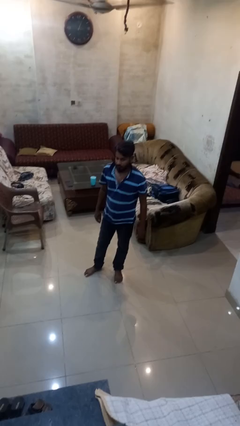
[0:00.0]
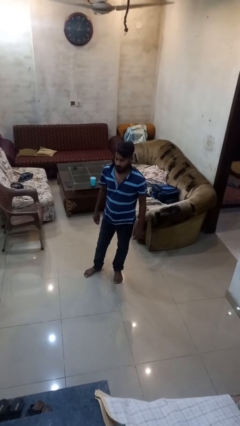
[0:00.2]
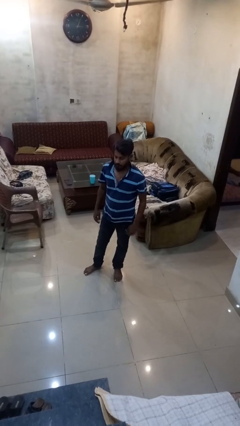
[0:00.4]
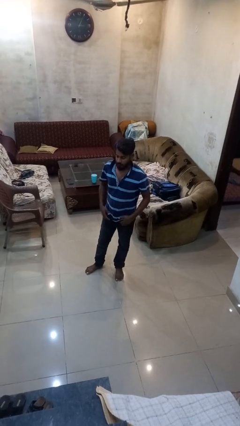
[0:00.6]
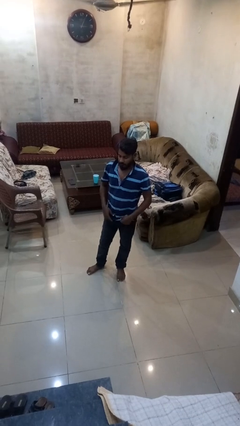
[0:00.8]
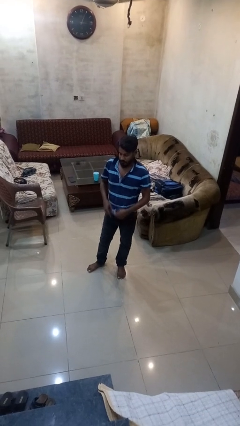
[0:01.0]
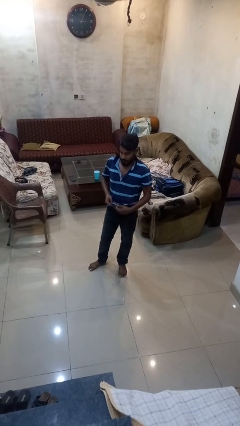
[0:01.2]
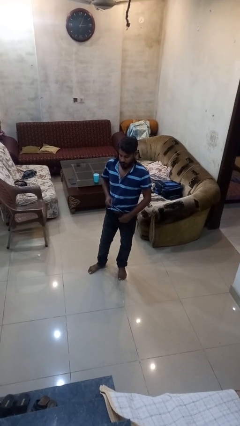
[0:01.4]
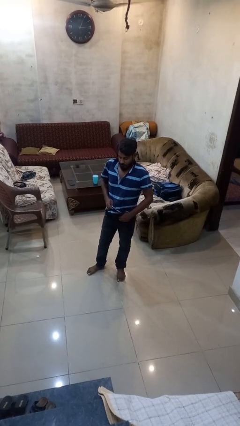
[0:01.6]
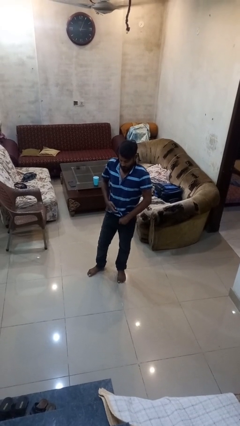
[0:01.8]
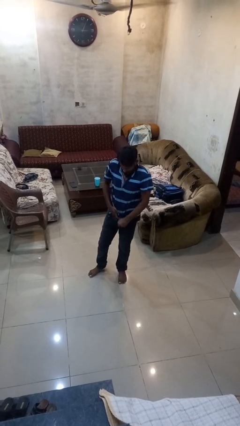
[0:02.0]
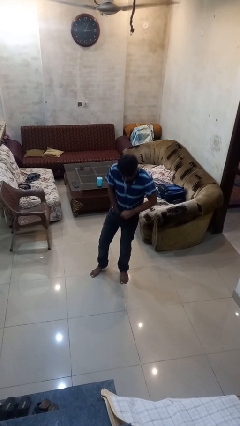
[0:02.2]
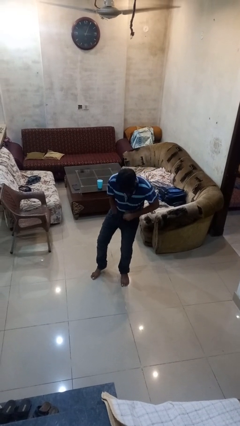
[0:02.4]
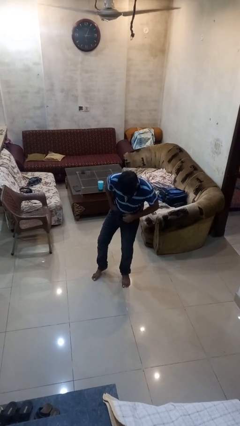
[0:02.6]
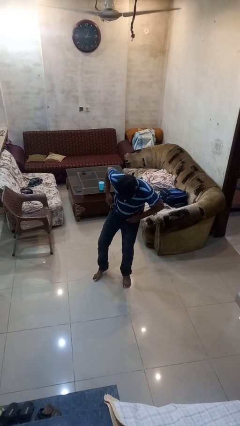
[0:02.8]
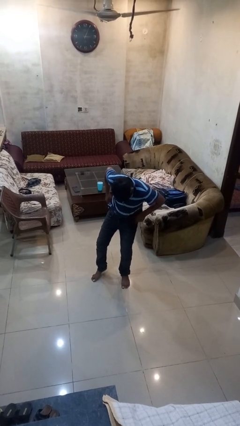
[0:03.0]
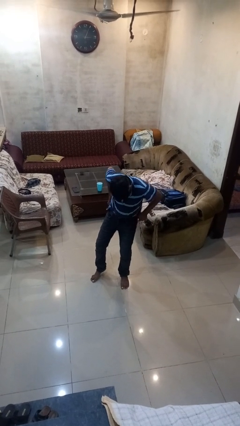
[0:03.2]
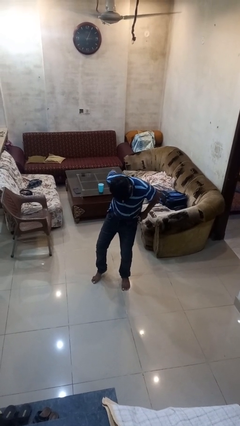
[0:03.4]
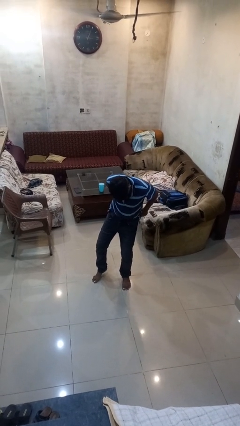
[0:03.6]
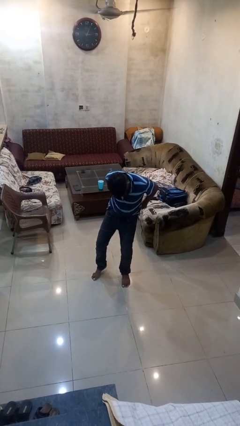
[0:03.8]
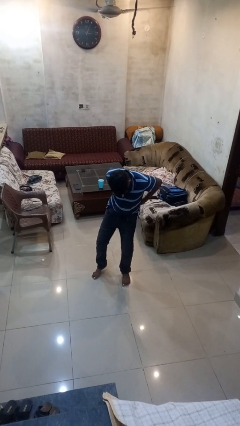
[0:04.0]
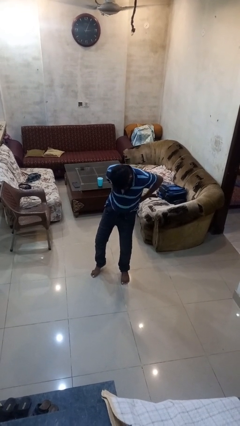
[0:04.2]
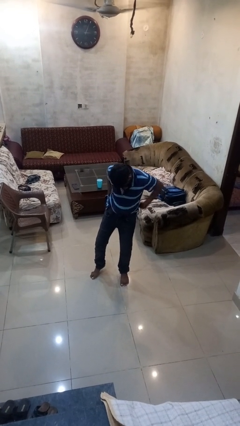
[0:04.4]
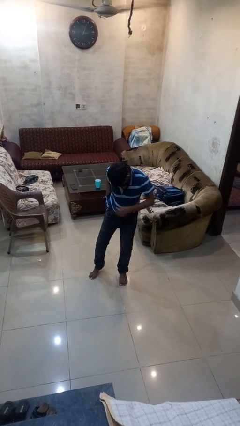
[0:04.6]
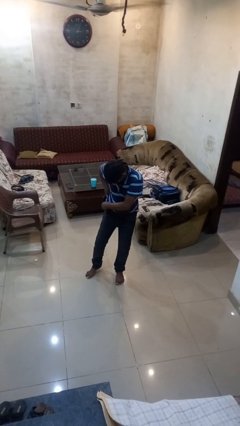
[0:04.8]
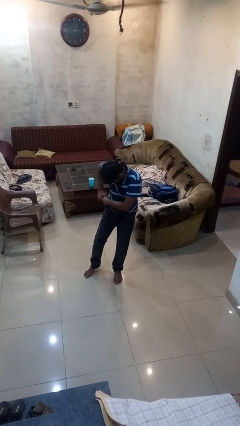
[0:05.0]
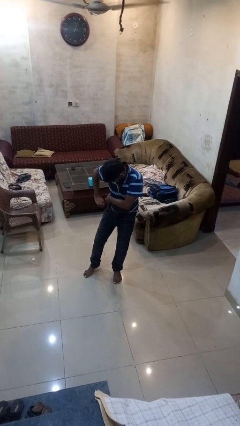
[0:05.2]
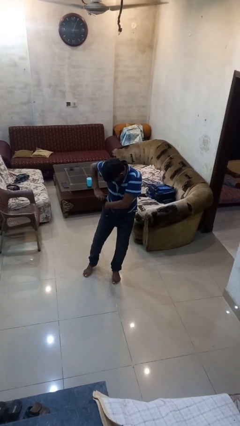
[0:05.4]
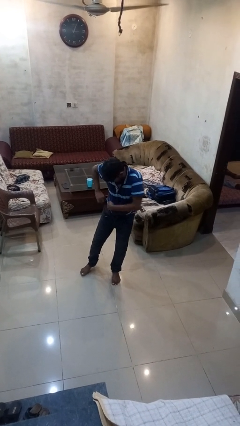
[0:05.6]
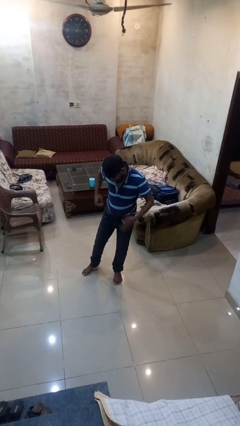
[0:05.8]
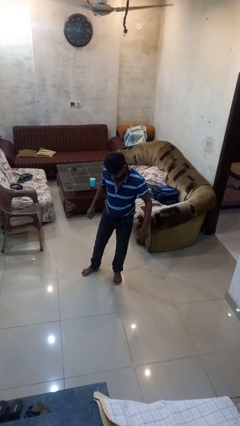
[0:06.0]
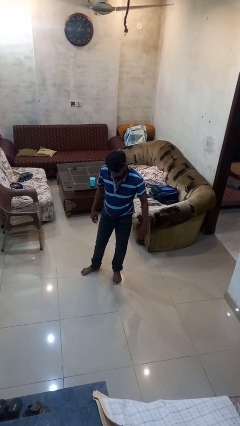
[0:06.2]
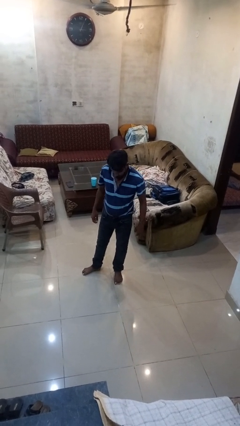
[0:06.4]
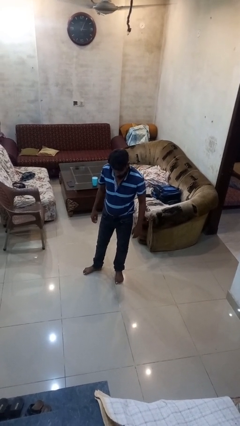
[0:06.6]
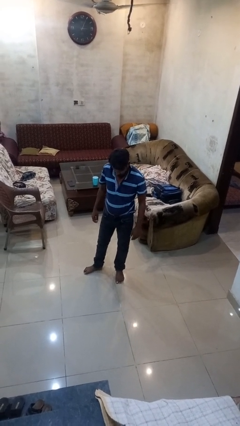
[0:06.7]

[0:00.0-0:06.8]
person tucks in shirt

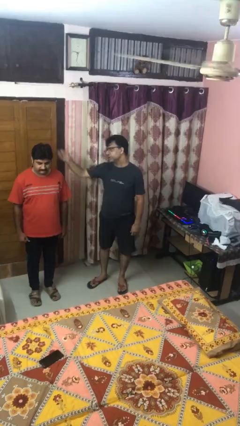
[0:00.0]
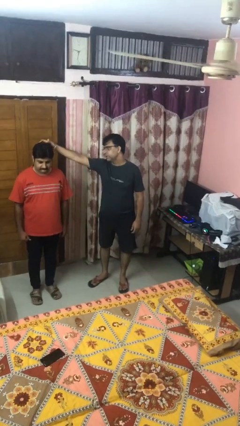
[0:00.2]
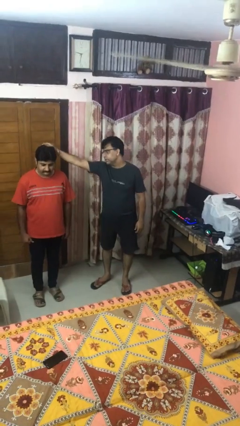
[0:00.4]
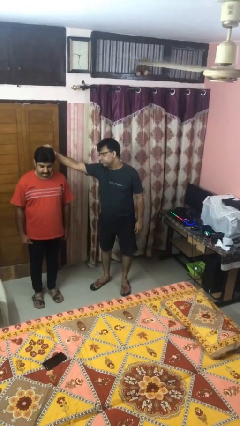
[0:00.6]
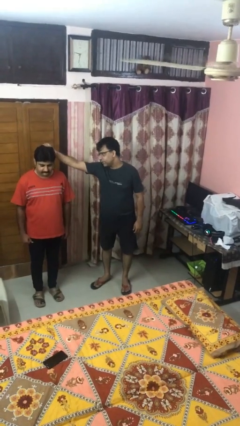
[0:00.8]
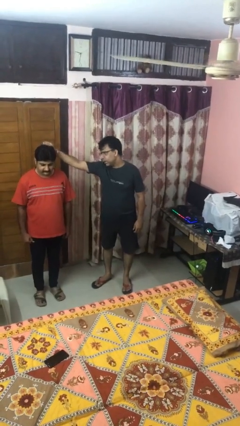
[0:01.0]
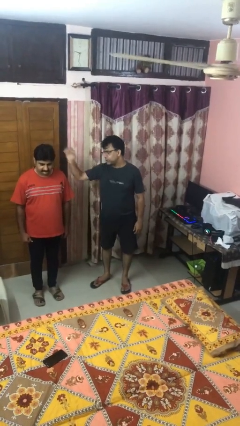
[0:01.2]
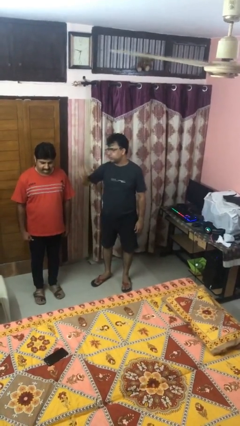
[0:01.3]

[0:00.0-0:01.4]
person grabs person by hair

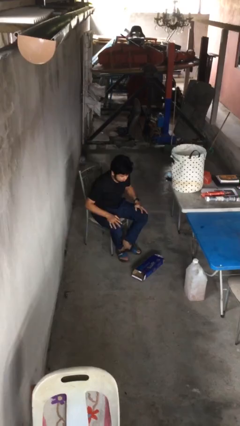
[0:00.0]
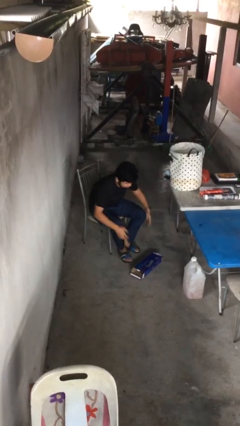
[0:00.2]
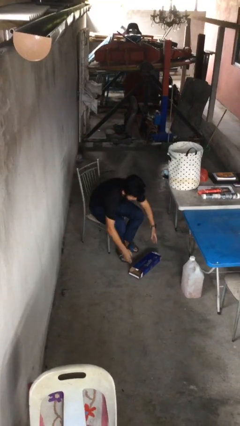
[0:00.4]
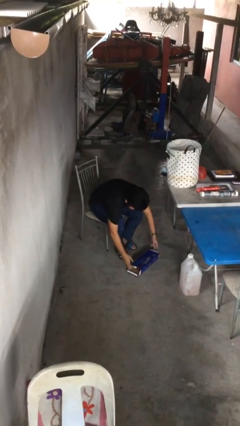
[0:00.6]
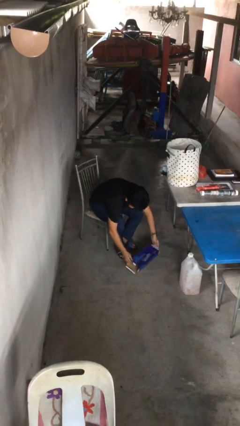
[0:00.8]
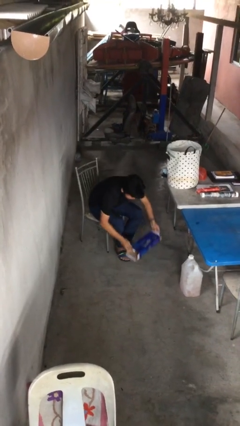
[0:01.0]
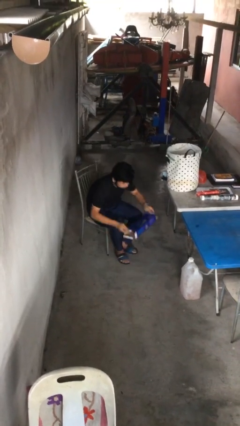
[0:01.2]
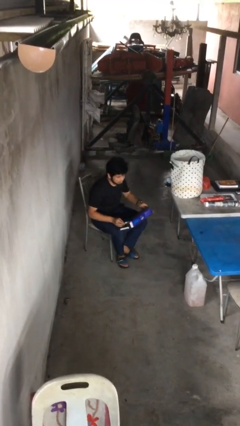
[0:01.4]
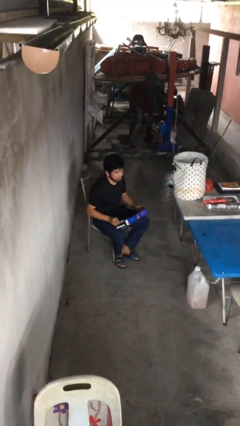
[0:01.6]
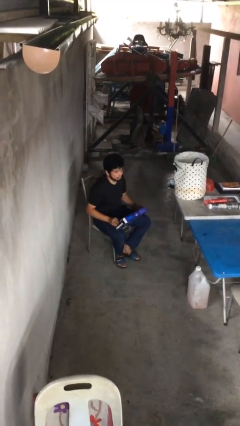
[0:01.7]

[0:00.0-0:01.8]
person picks up object from floor

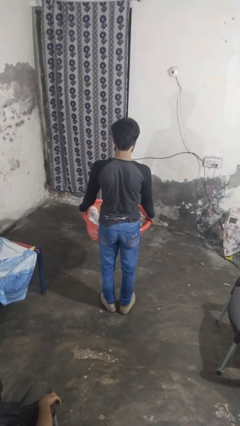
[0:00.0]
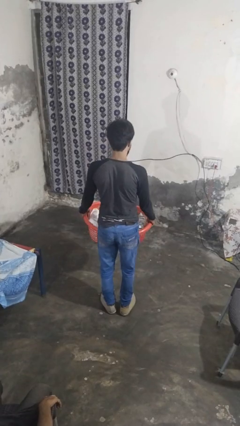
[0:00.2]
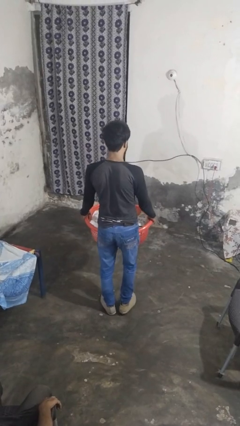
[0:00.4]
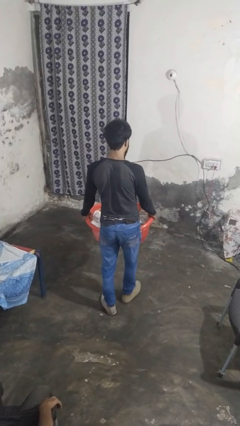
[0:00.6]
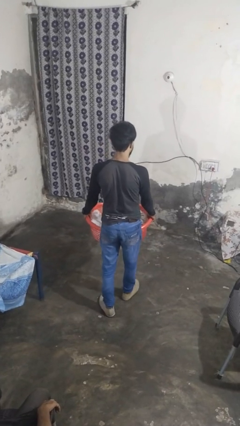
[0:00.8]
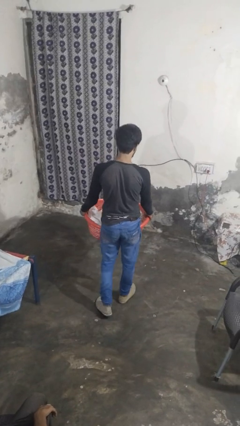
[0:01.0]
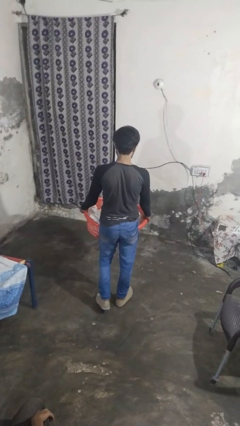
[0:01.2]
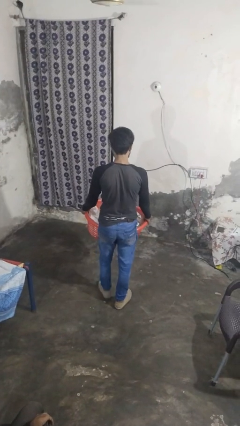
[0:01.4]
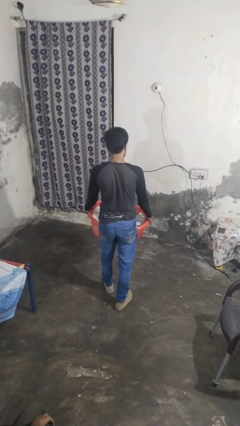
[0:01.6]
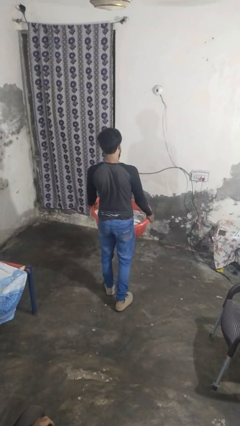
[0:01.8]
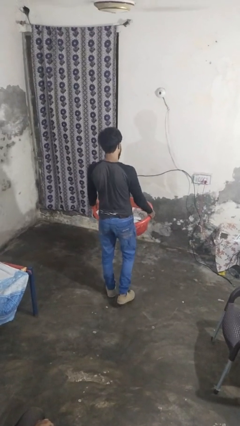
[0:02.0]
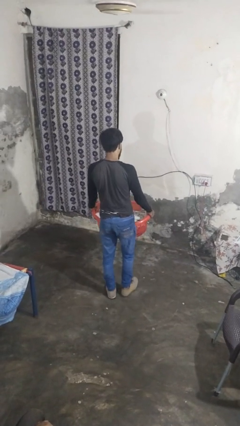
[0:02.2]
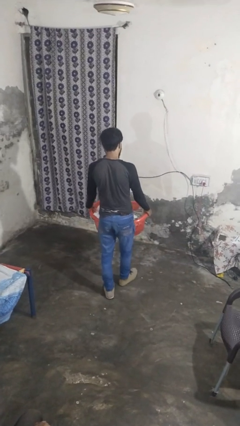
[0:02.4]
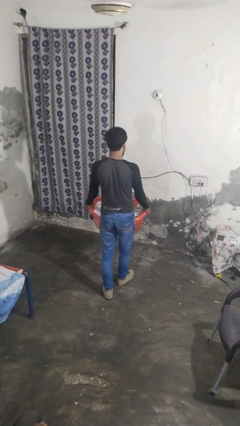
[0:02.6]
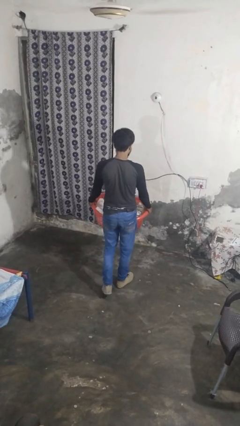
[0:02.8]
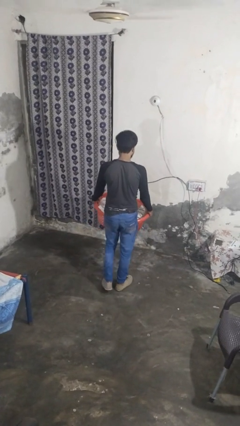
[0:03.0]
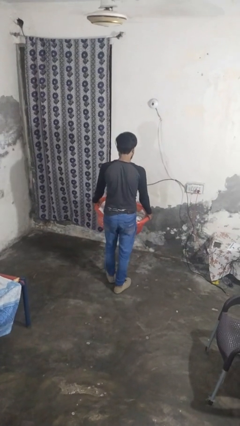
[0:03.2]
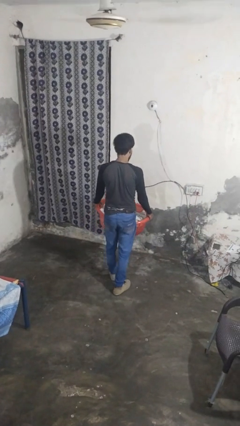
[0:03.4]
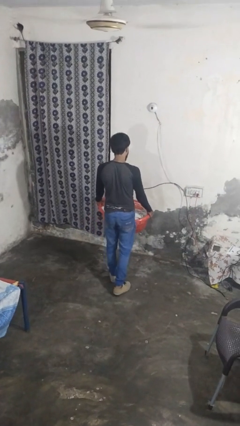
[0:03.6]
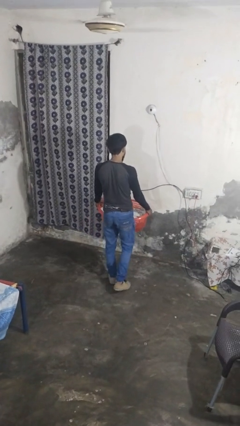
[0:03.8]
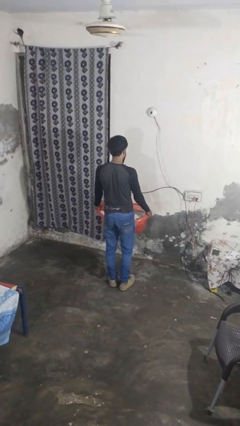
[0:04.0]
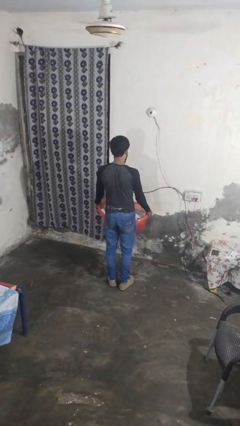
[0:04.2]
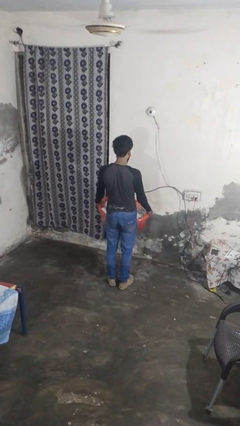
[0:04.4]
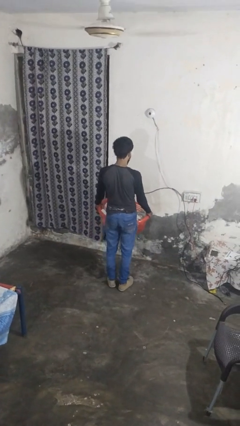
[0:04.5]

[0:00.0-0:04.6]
person carries laundry basket

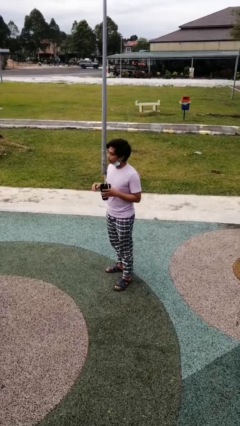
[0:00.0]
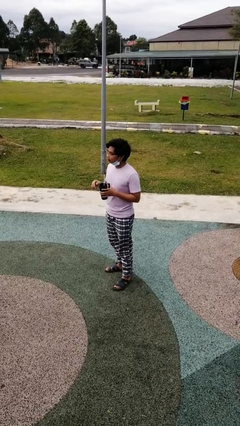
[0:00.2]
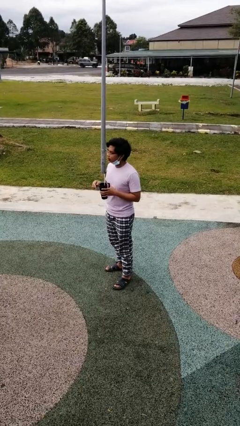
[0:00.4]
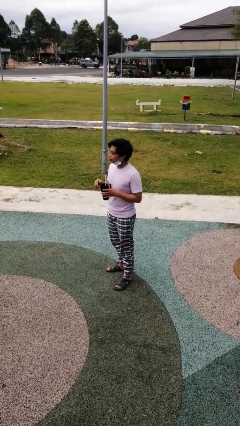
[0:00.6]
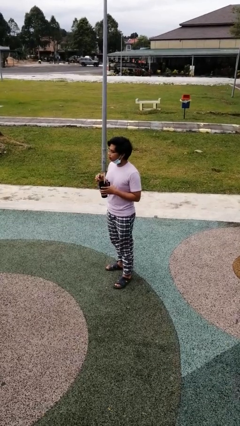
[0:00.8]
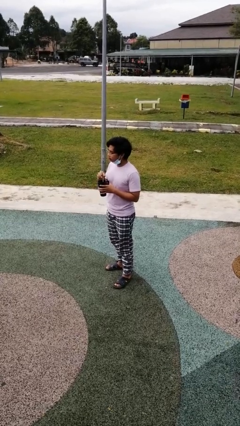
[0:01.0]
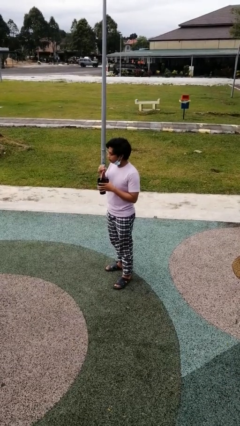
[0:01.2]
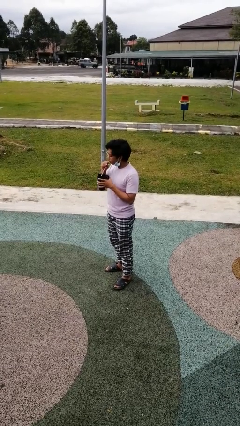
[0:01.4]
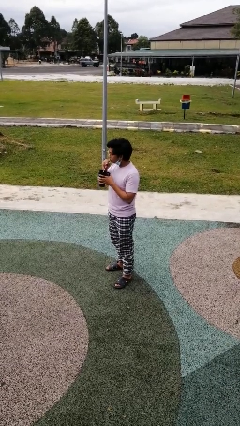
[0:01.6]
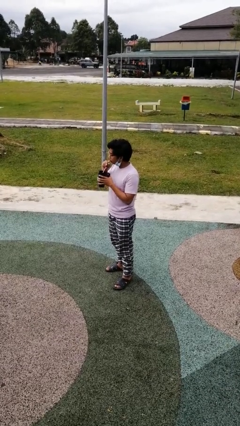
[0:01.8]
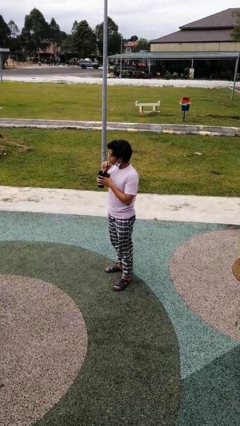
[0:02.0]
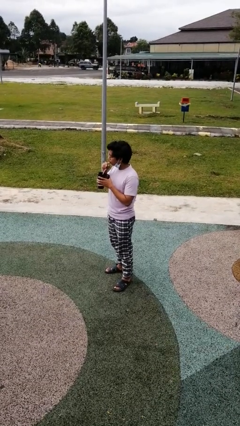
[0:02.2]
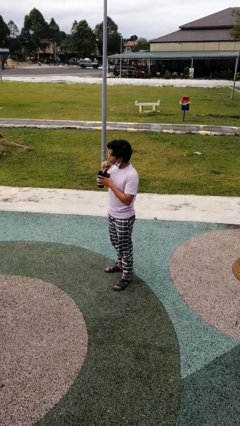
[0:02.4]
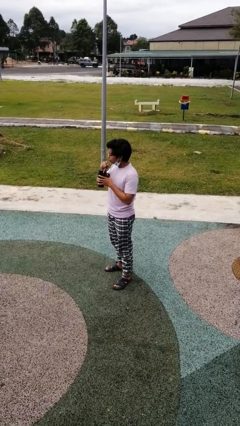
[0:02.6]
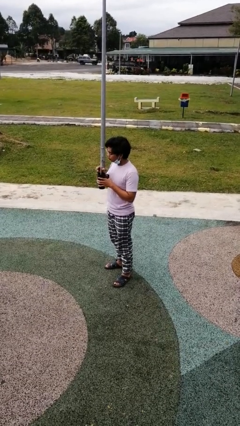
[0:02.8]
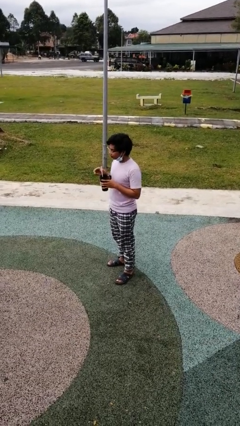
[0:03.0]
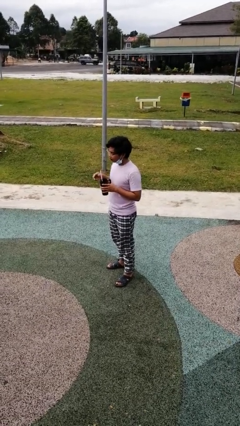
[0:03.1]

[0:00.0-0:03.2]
person drinks from straw
